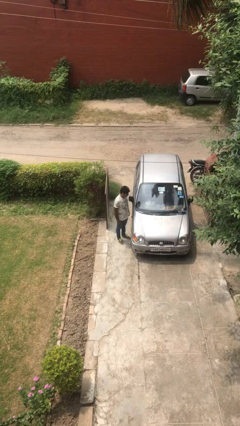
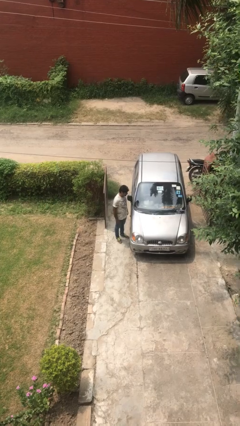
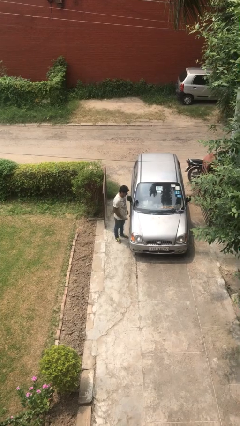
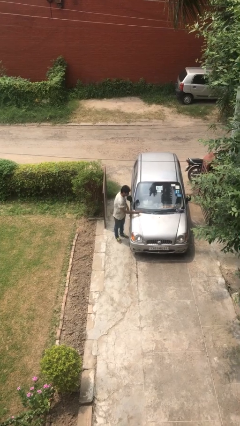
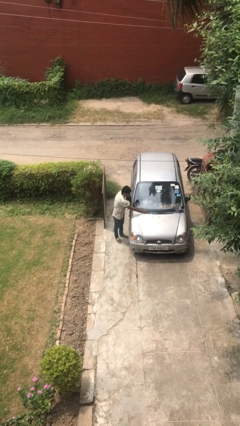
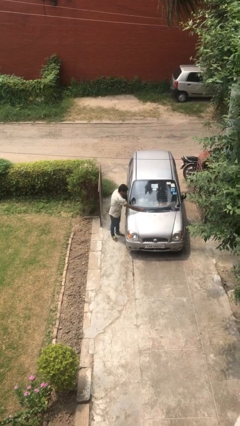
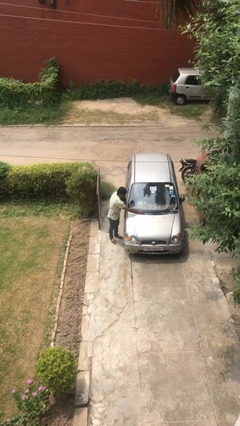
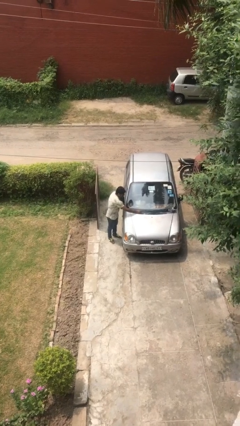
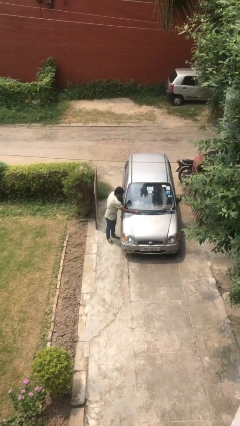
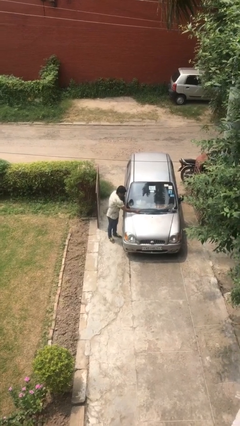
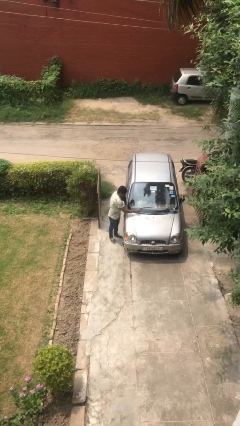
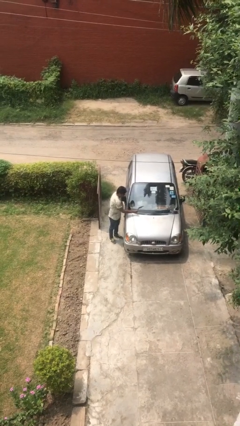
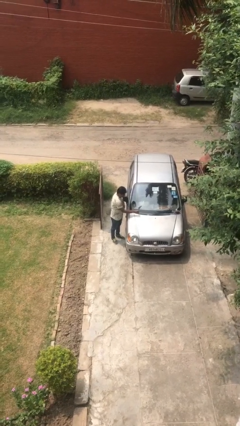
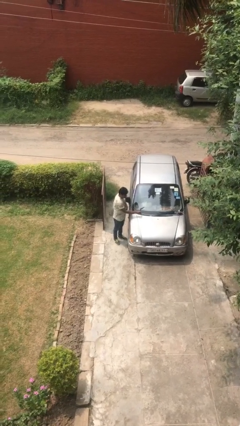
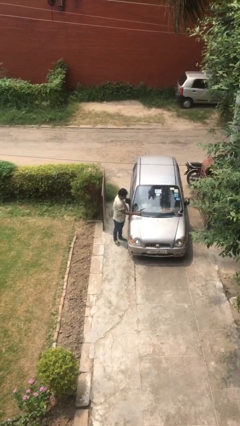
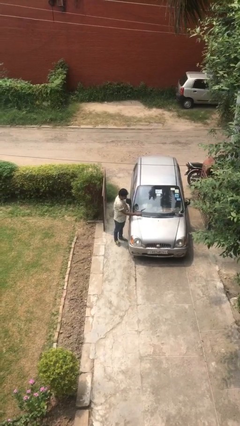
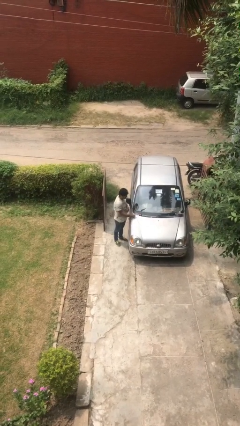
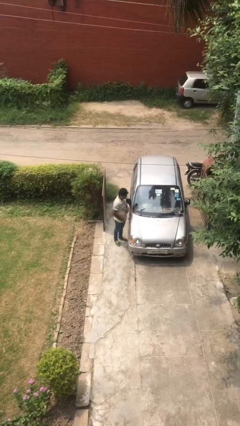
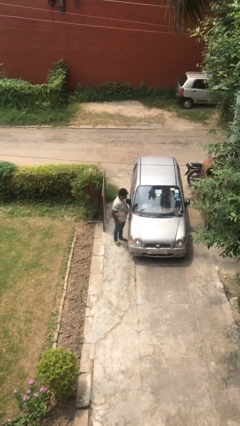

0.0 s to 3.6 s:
person flips up car wipers

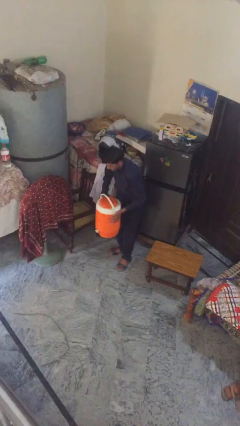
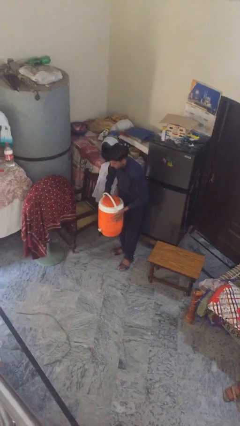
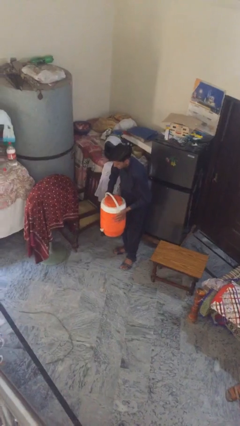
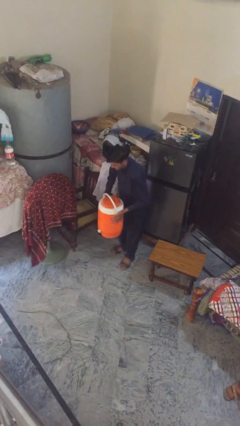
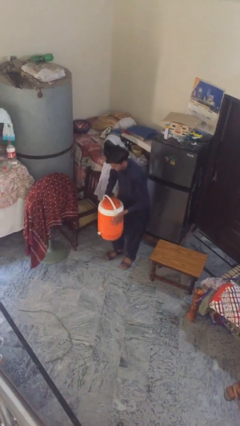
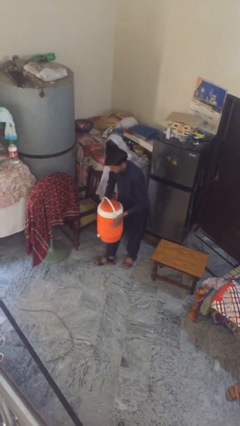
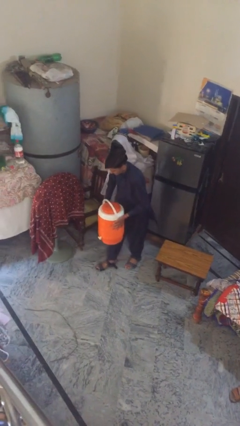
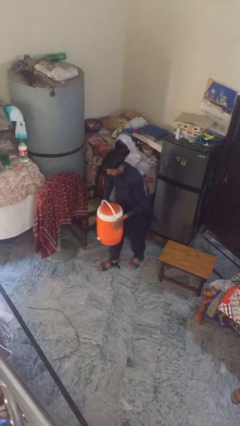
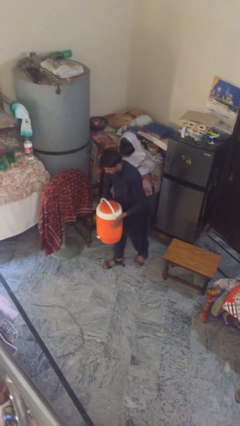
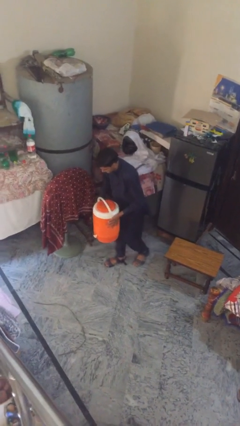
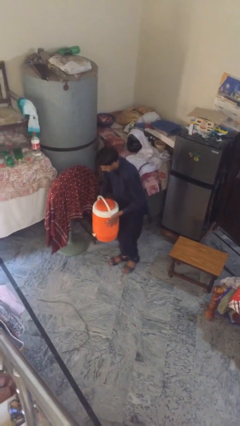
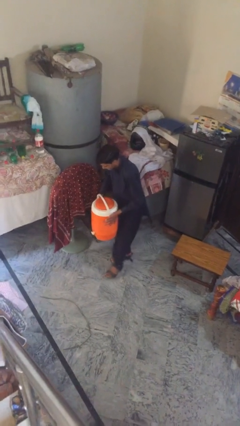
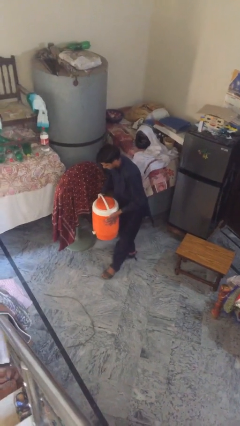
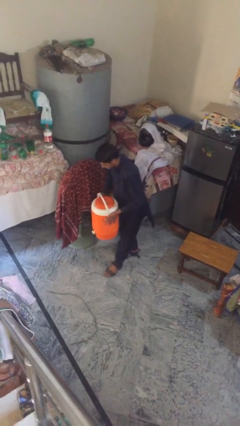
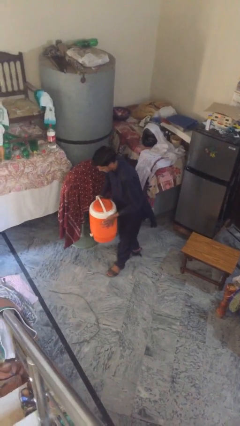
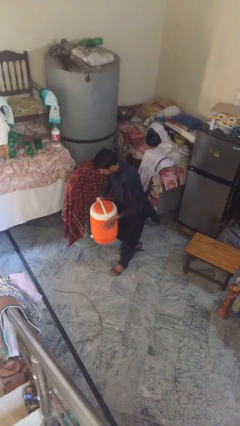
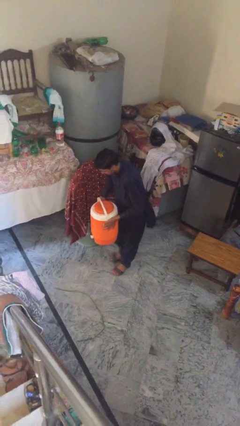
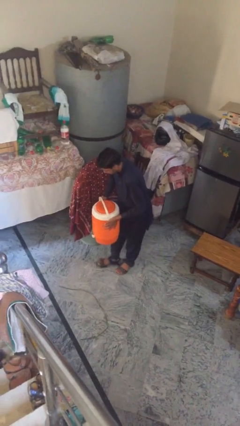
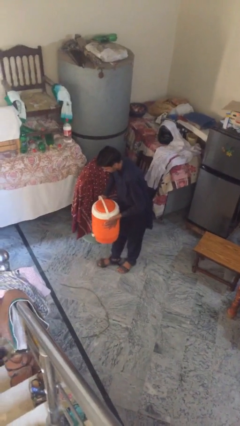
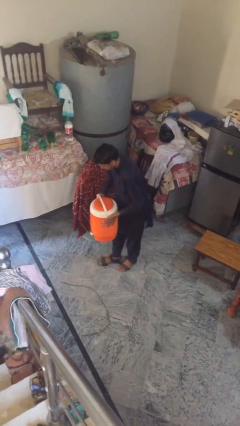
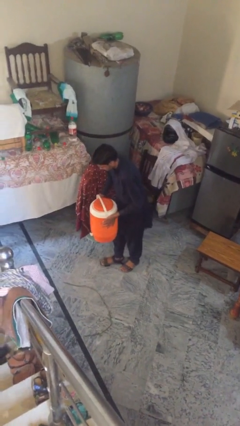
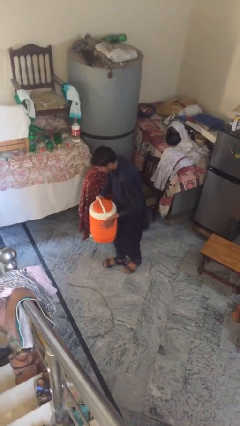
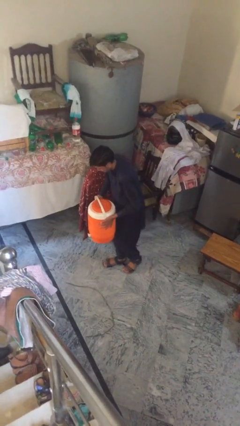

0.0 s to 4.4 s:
person carries heavy object

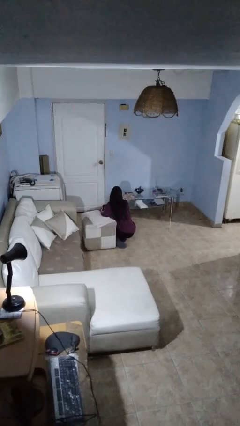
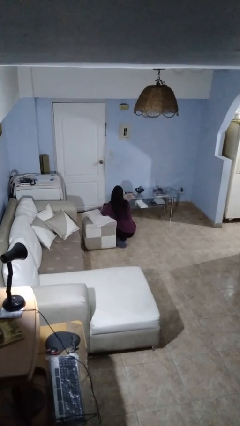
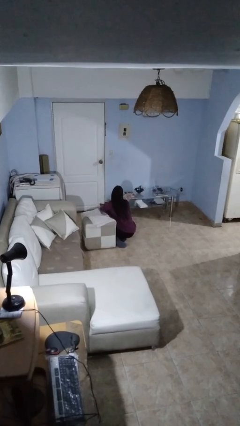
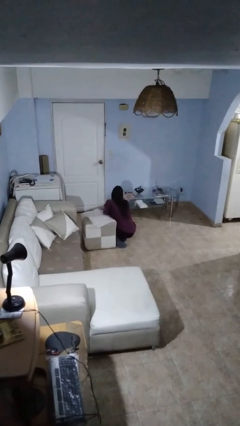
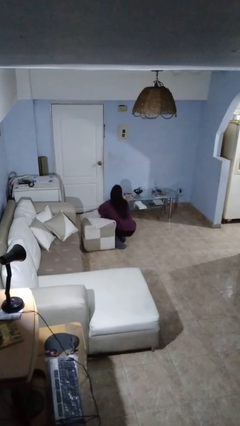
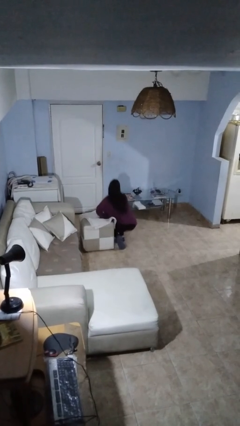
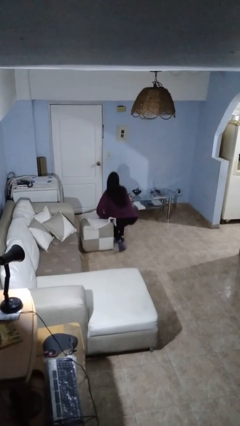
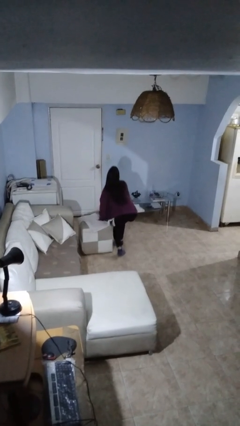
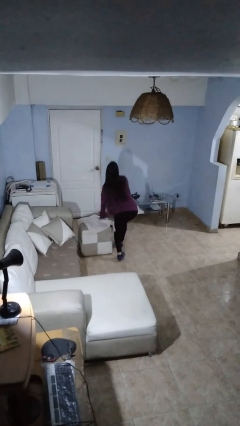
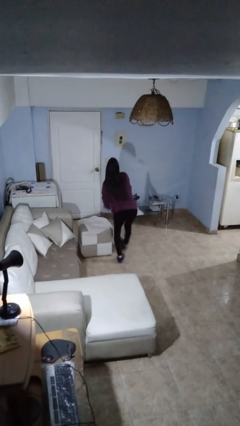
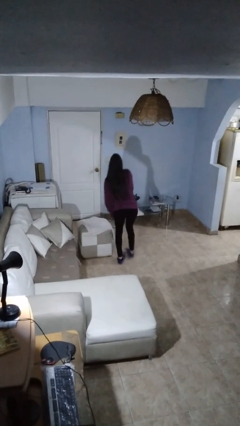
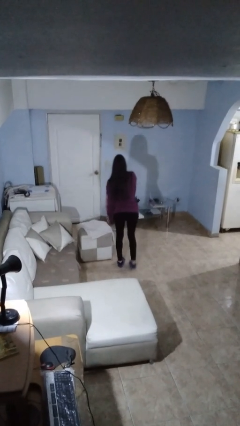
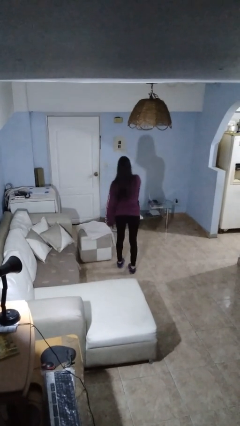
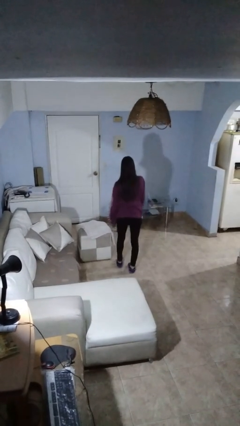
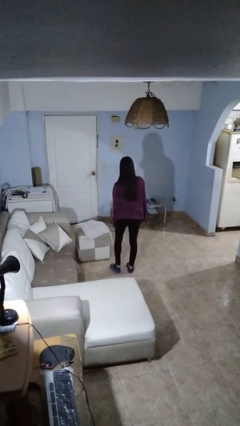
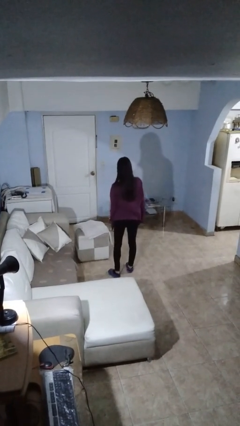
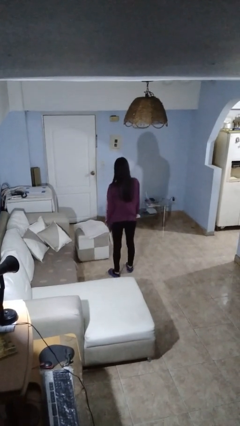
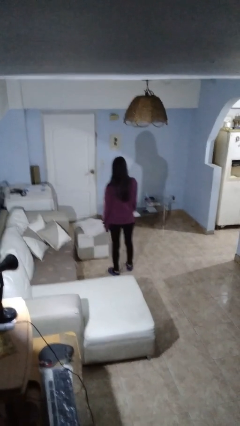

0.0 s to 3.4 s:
person stands up from floor

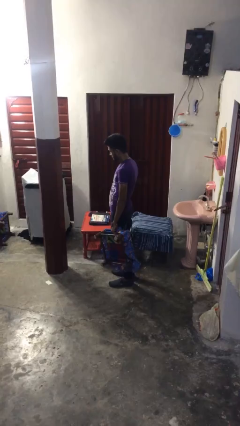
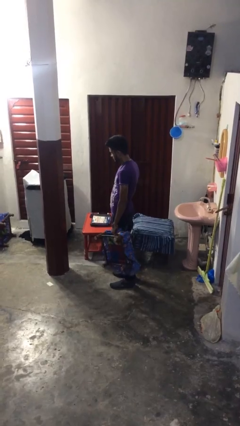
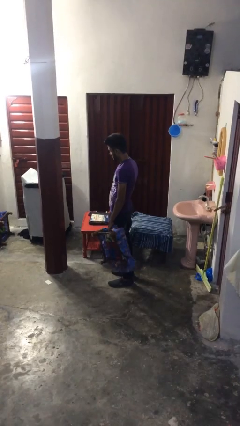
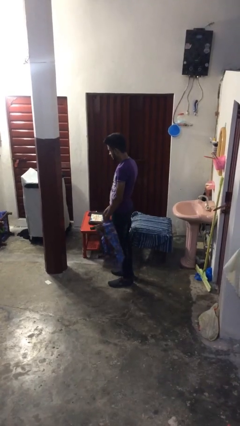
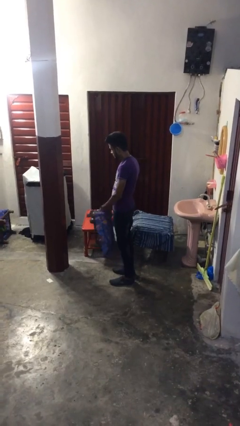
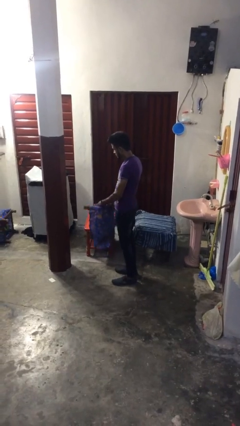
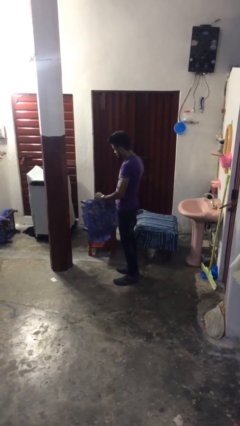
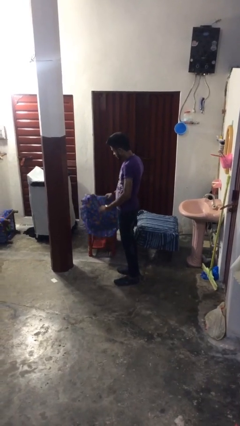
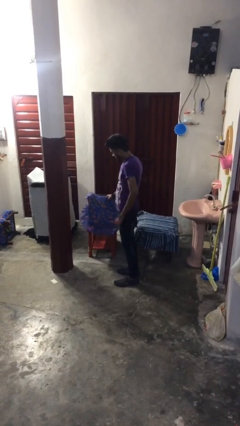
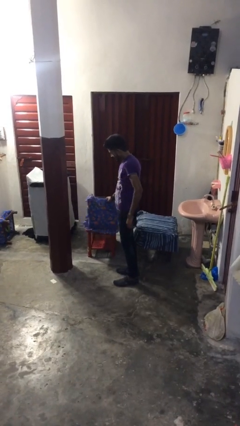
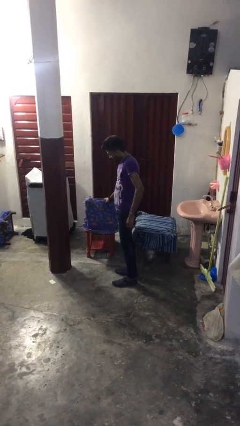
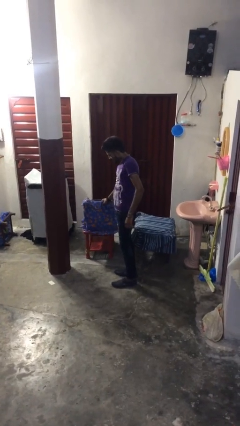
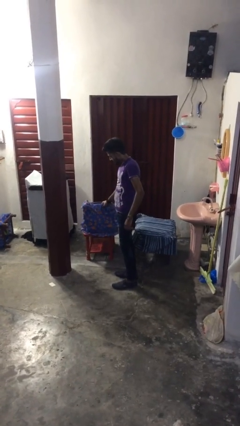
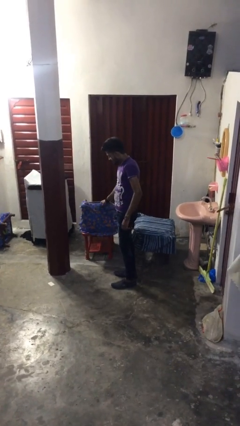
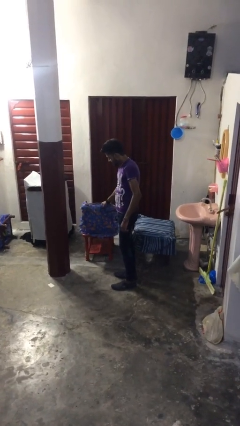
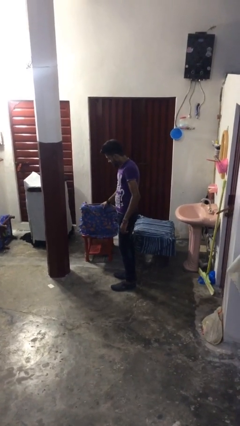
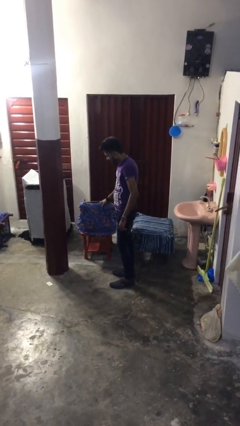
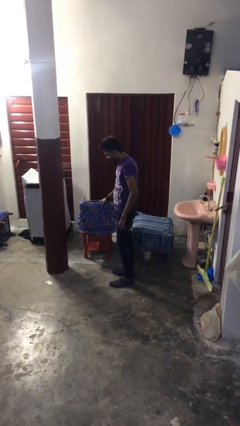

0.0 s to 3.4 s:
person puts down object on table

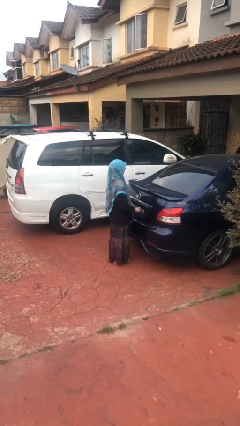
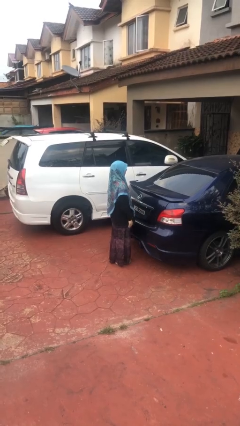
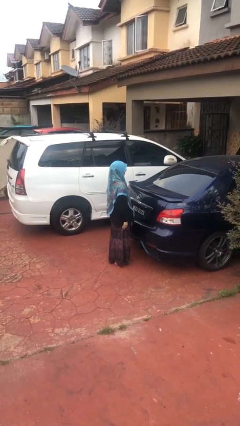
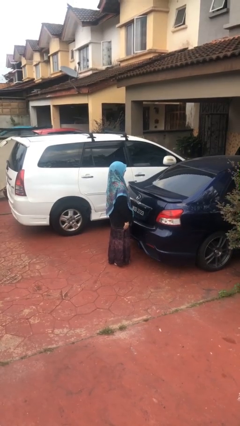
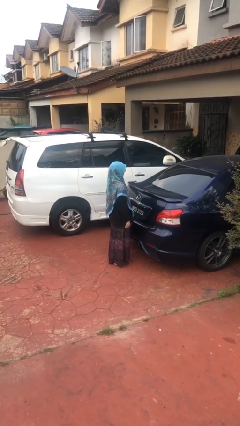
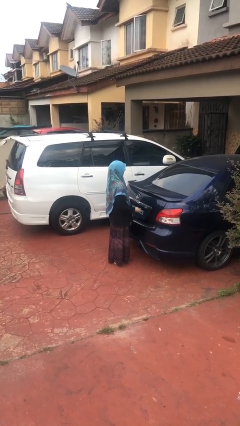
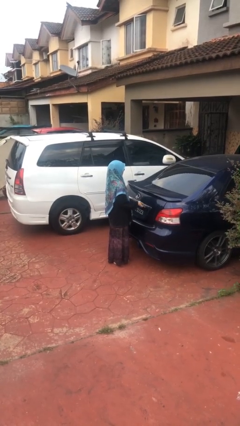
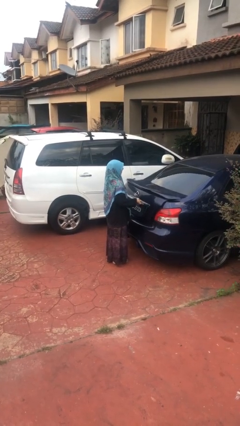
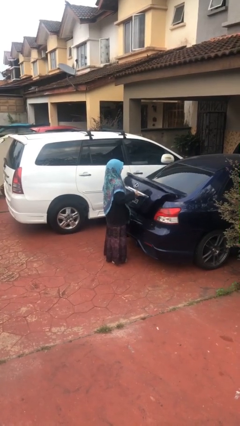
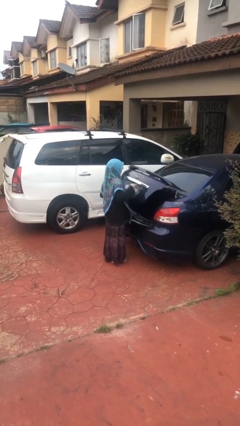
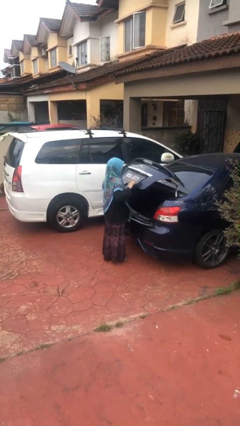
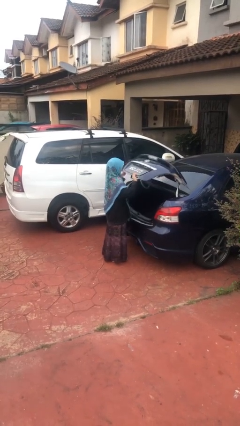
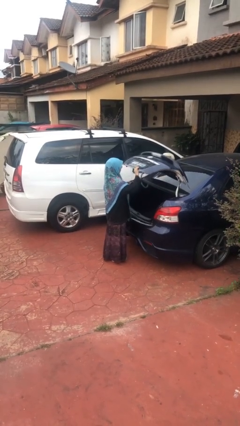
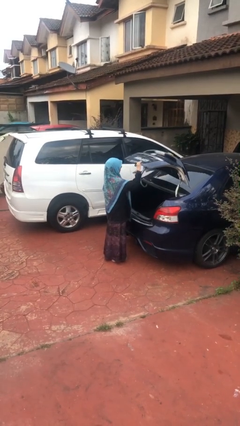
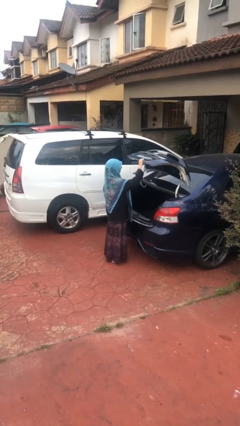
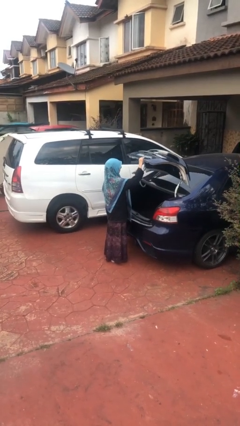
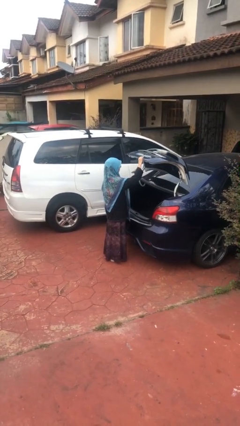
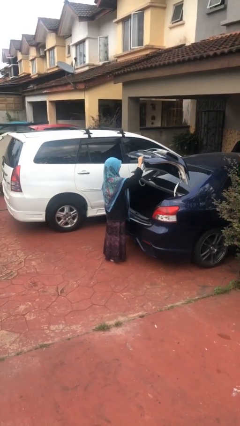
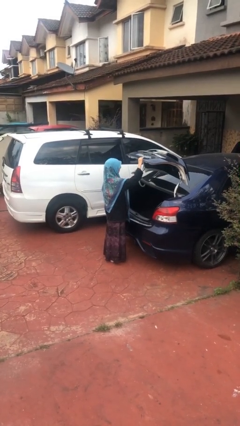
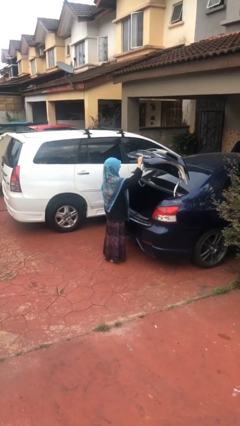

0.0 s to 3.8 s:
person opens car trunk
